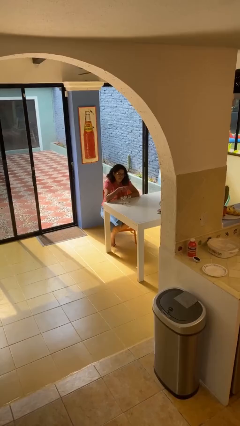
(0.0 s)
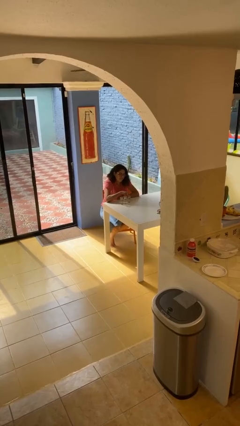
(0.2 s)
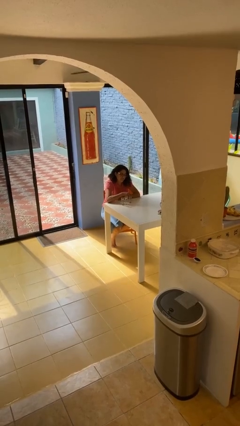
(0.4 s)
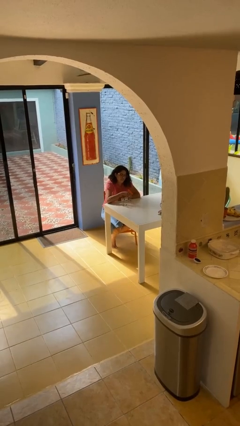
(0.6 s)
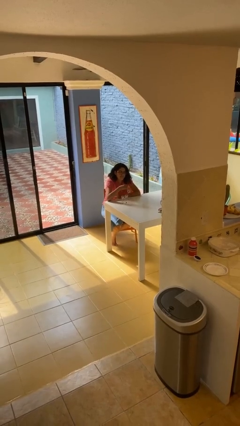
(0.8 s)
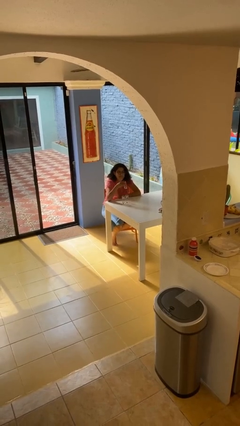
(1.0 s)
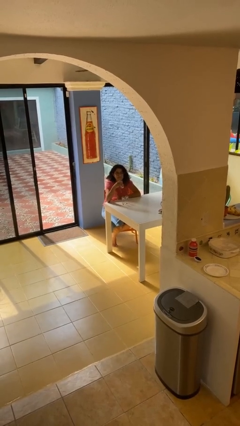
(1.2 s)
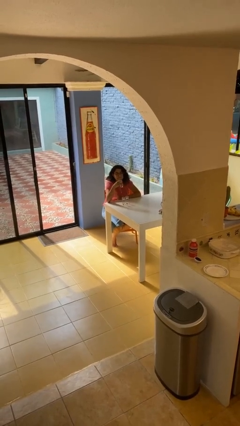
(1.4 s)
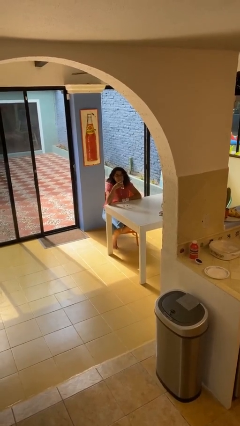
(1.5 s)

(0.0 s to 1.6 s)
person picks up object from table

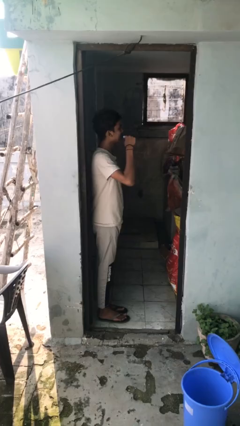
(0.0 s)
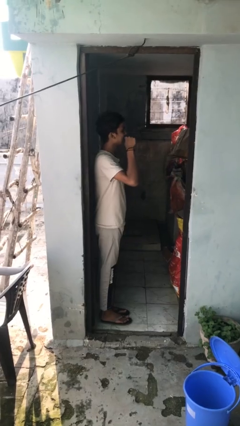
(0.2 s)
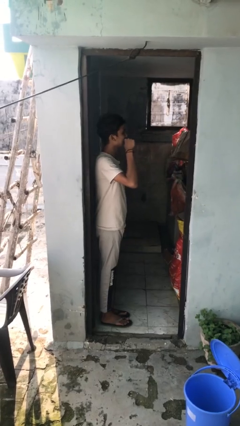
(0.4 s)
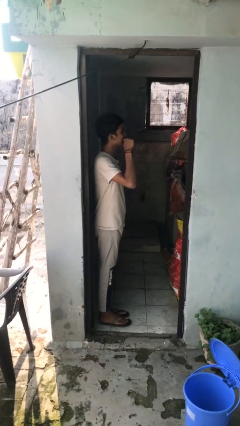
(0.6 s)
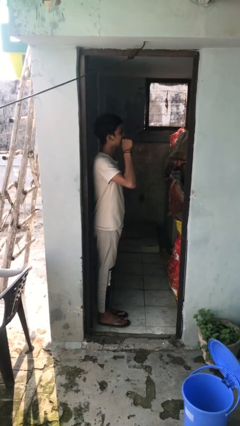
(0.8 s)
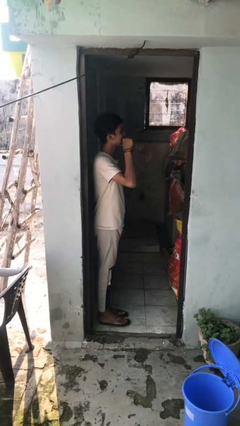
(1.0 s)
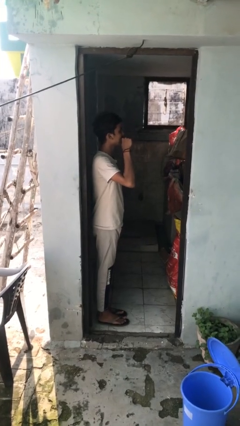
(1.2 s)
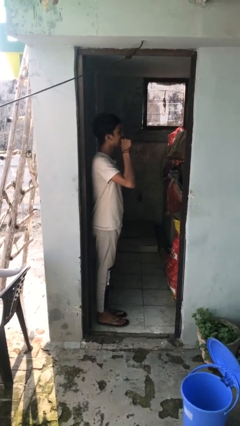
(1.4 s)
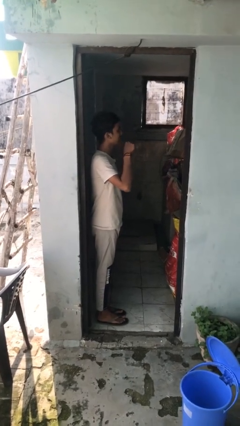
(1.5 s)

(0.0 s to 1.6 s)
person brushes teeth

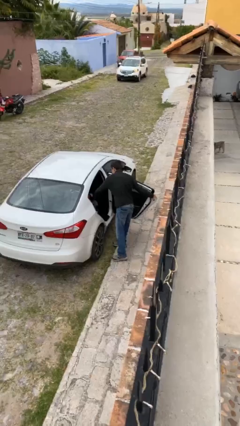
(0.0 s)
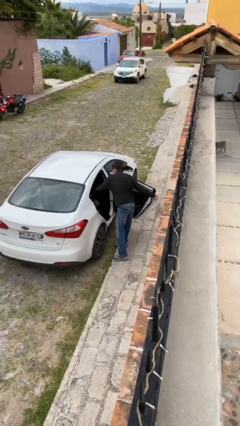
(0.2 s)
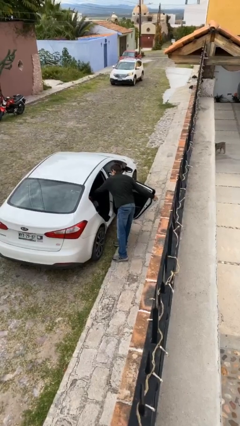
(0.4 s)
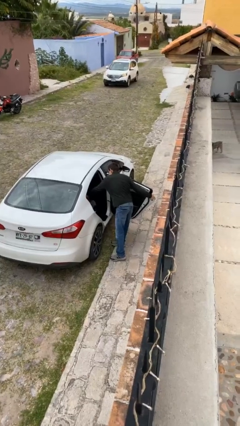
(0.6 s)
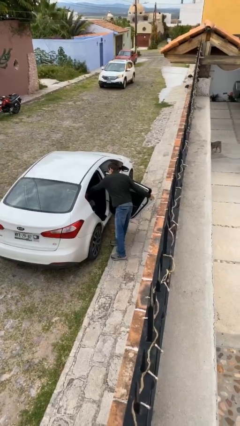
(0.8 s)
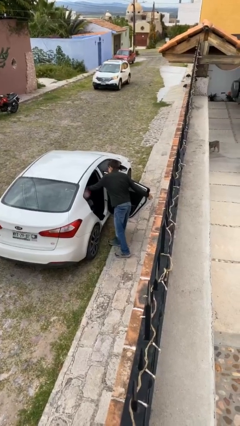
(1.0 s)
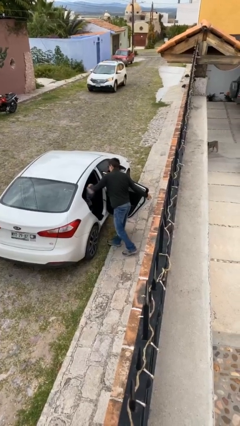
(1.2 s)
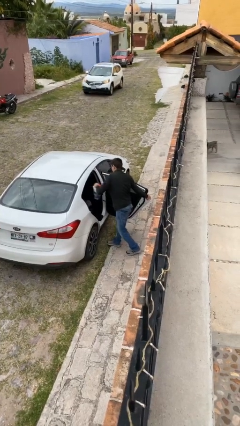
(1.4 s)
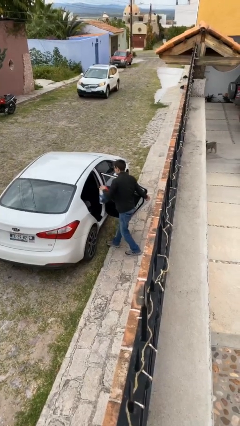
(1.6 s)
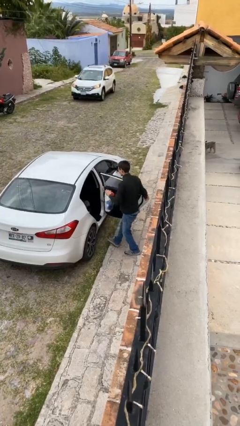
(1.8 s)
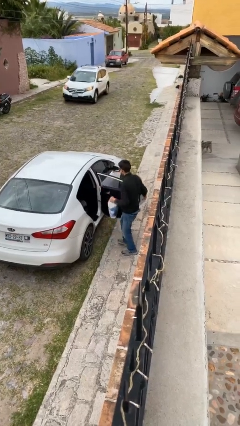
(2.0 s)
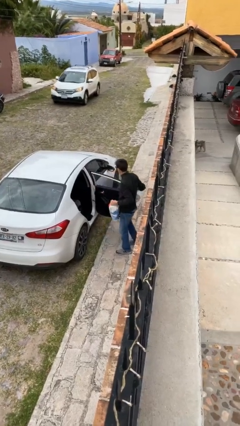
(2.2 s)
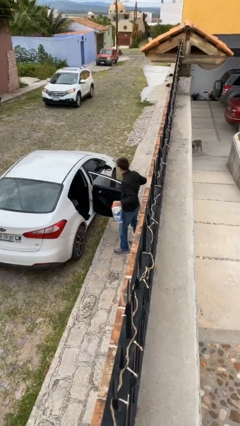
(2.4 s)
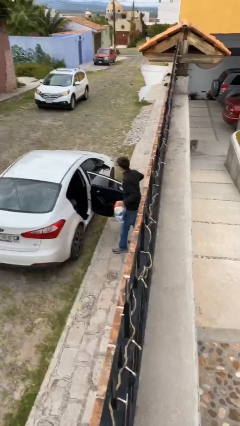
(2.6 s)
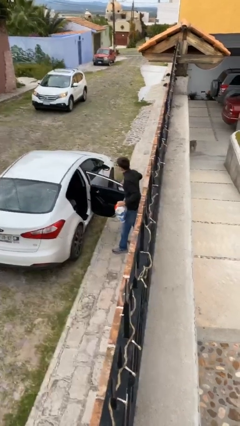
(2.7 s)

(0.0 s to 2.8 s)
person unloads car

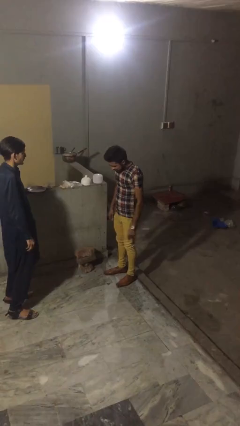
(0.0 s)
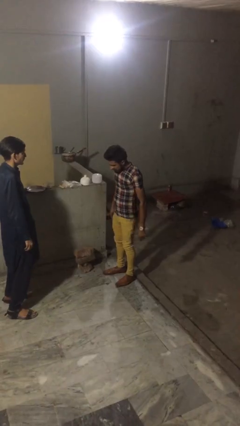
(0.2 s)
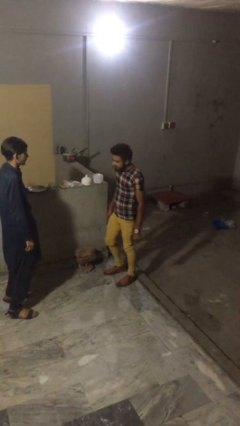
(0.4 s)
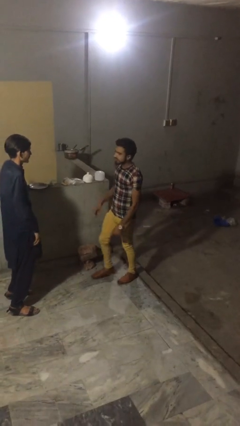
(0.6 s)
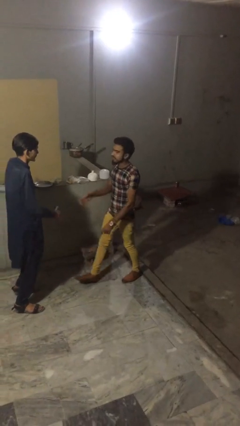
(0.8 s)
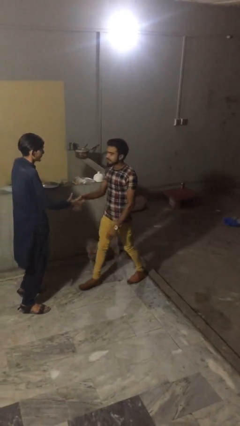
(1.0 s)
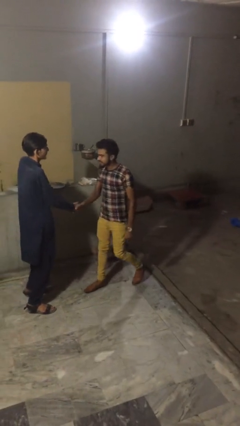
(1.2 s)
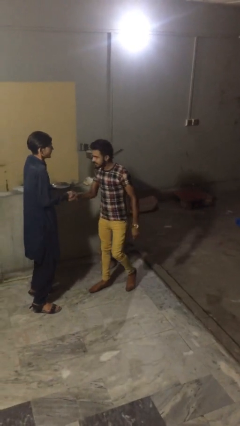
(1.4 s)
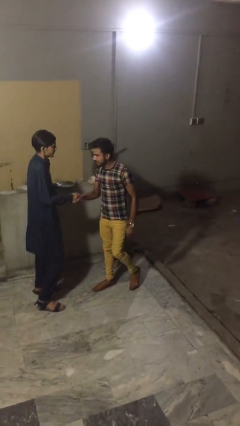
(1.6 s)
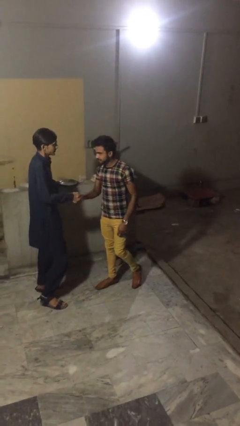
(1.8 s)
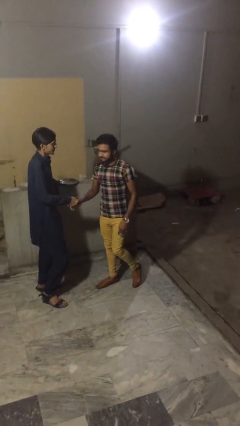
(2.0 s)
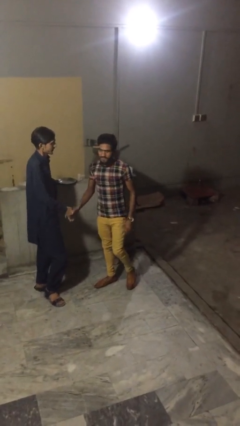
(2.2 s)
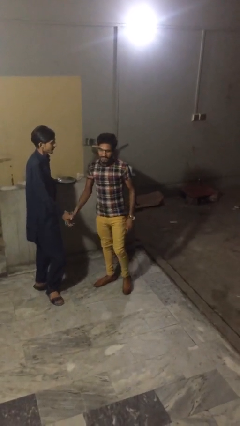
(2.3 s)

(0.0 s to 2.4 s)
person shakes hand

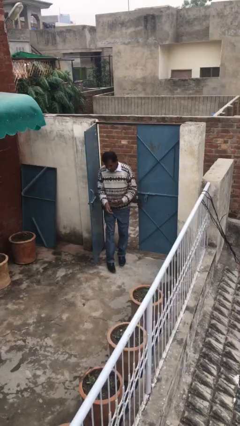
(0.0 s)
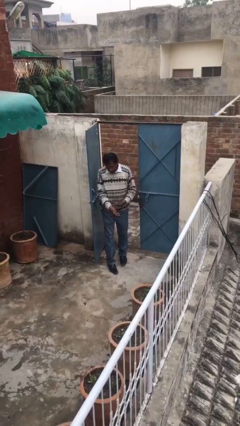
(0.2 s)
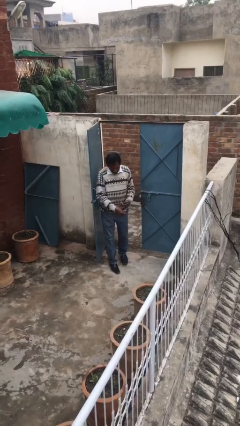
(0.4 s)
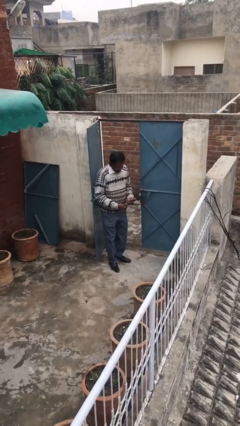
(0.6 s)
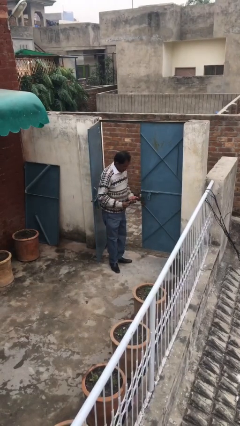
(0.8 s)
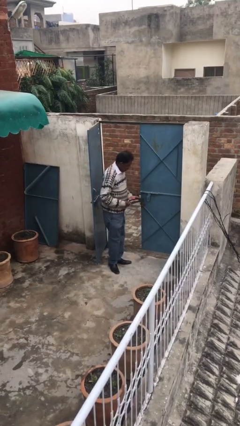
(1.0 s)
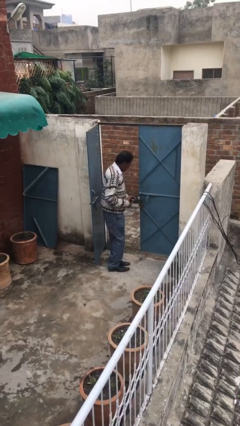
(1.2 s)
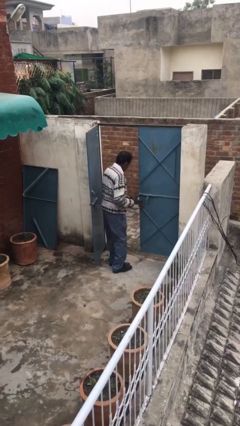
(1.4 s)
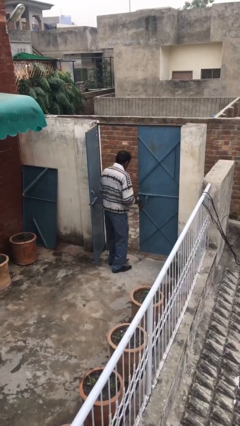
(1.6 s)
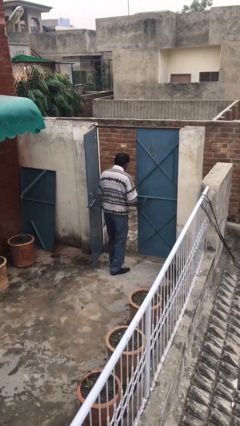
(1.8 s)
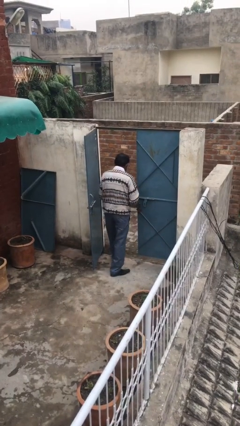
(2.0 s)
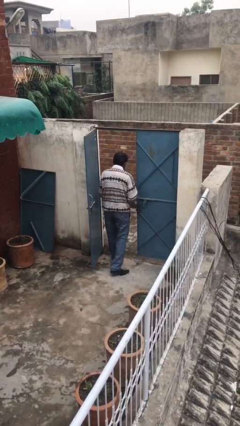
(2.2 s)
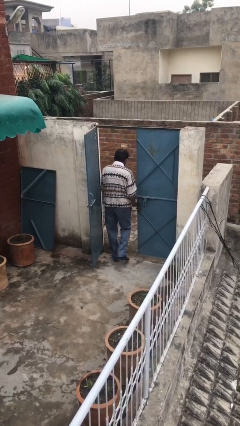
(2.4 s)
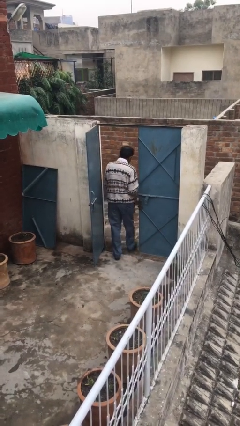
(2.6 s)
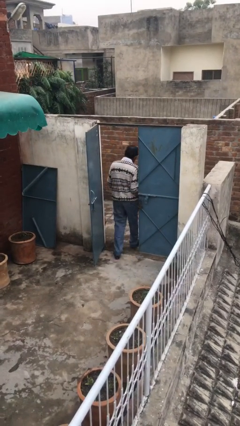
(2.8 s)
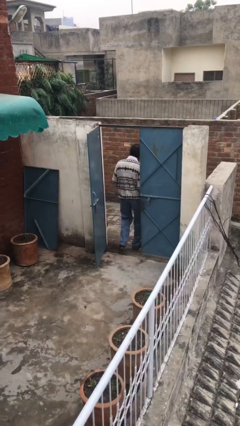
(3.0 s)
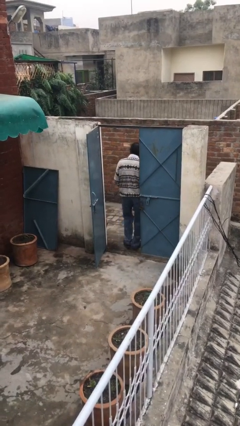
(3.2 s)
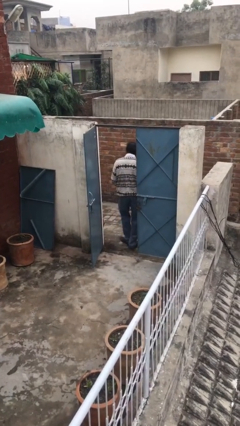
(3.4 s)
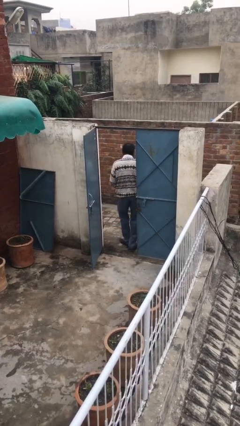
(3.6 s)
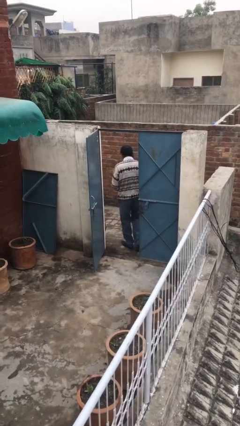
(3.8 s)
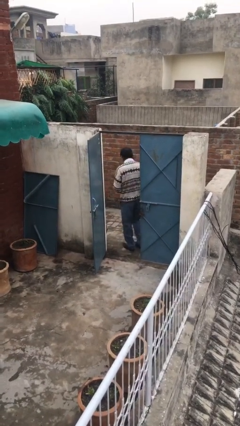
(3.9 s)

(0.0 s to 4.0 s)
person exits scene through structure

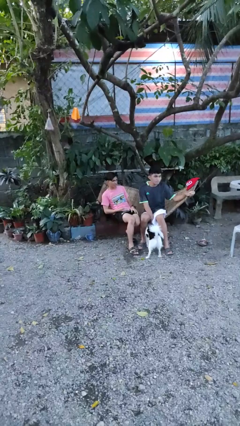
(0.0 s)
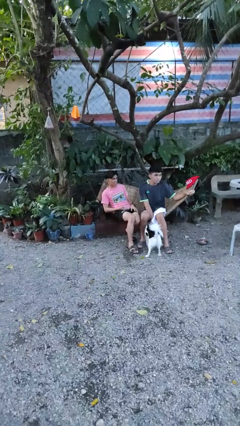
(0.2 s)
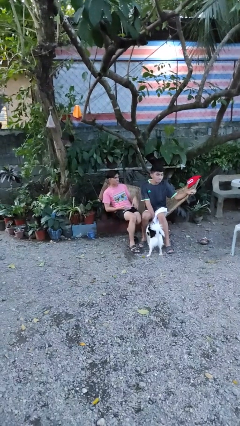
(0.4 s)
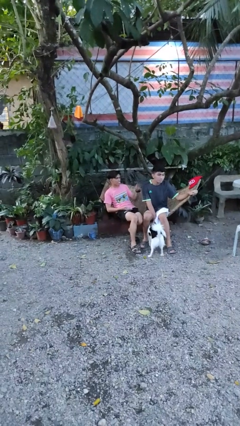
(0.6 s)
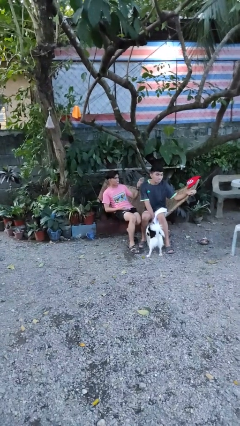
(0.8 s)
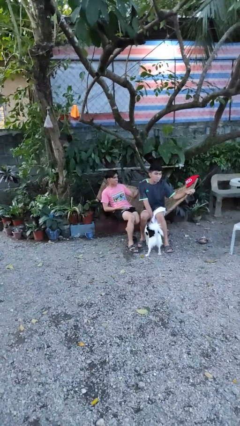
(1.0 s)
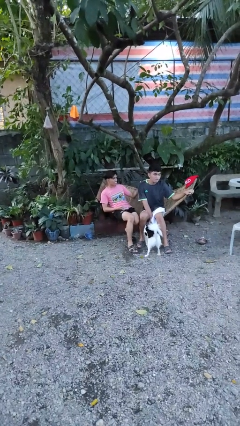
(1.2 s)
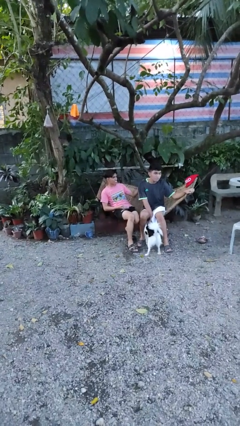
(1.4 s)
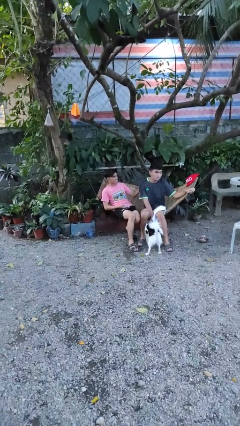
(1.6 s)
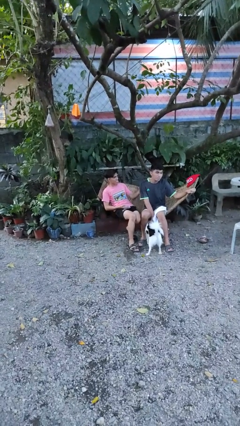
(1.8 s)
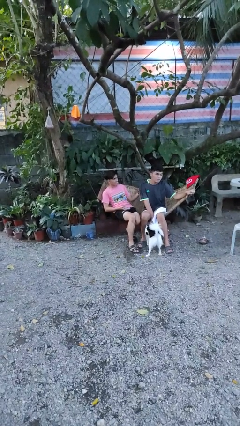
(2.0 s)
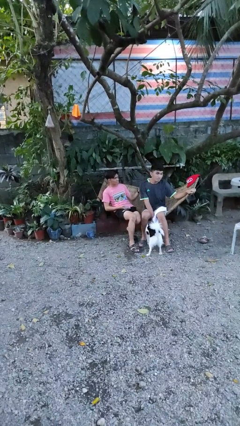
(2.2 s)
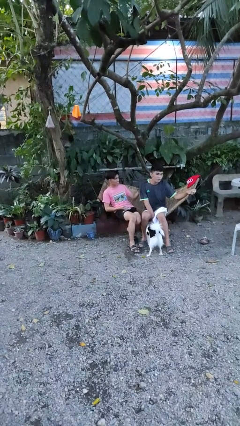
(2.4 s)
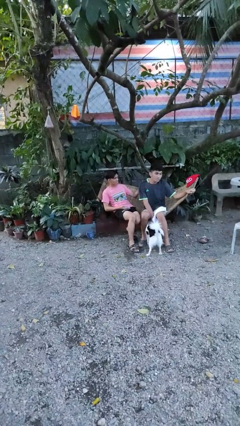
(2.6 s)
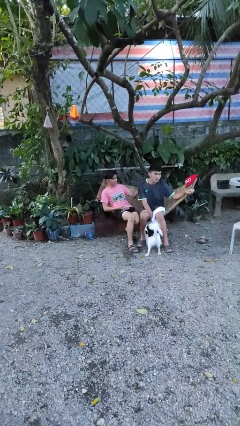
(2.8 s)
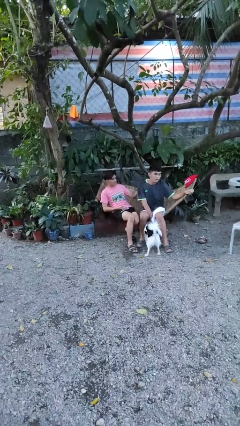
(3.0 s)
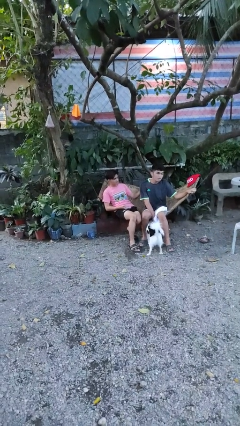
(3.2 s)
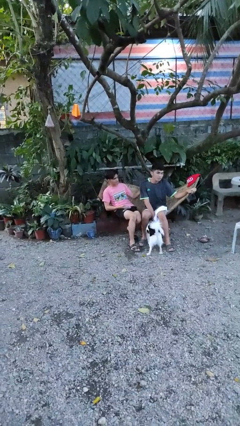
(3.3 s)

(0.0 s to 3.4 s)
person touches back of person

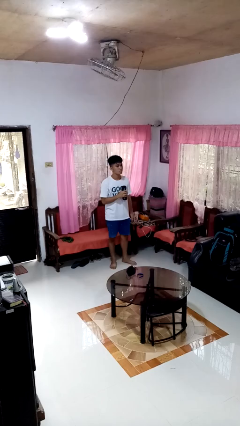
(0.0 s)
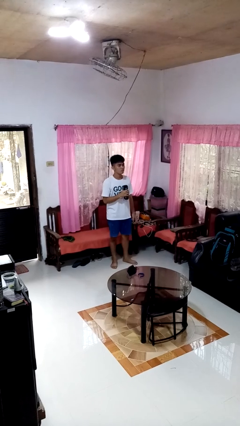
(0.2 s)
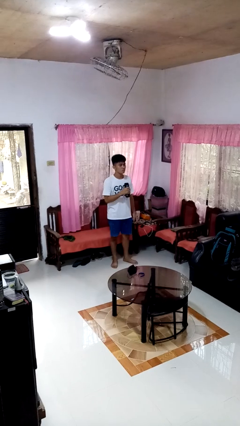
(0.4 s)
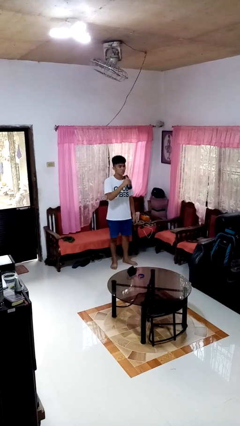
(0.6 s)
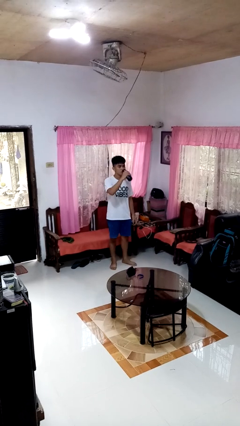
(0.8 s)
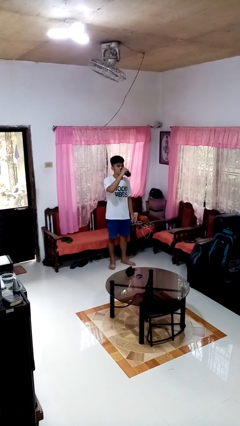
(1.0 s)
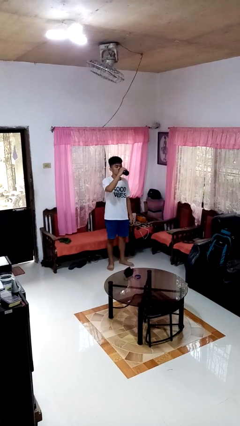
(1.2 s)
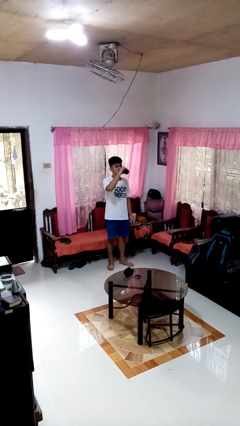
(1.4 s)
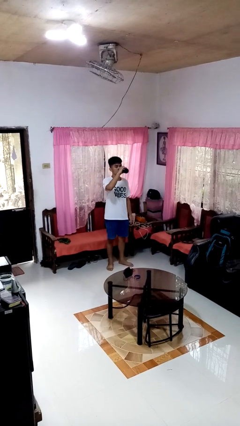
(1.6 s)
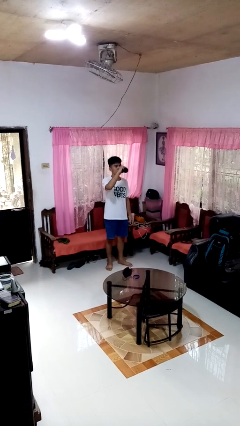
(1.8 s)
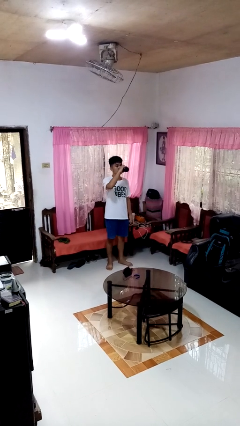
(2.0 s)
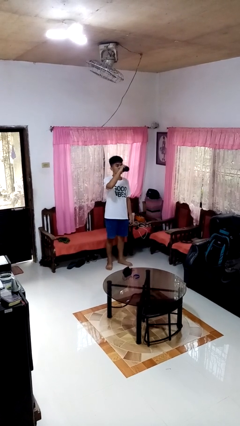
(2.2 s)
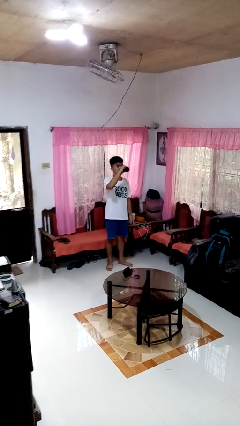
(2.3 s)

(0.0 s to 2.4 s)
person drinks from bottle
